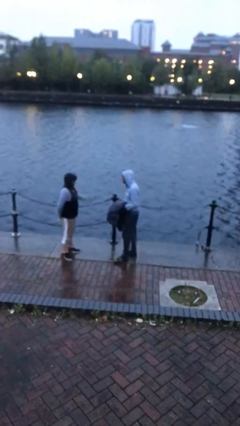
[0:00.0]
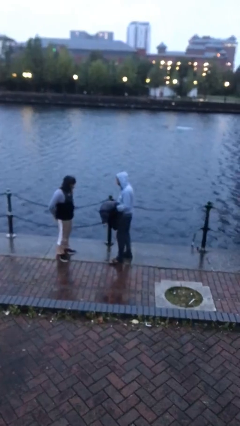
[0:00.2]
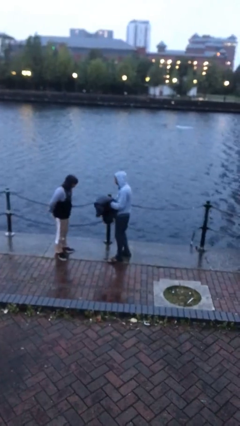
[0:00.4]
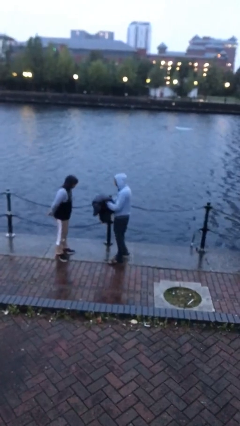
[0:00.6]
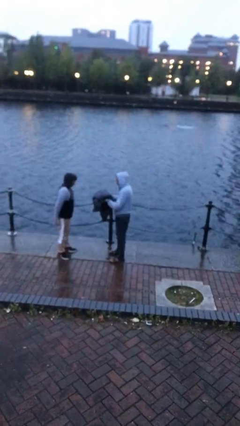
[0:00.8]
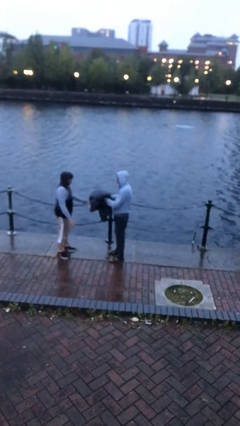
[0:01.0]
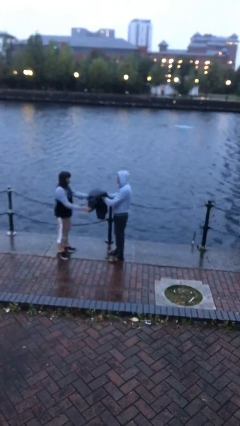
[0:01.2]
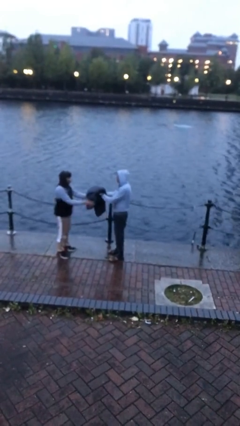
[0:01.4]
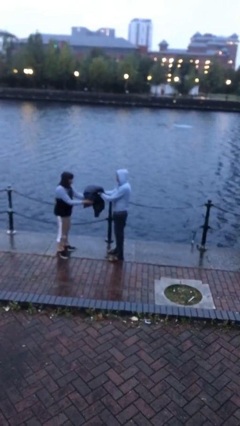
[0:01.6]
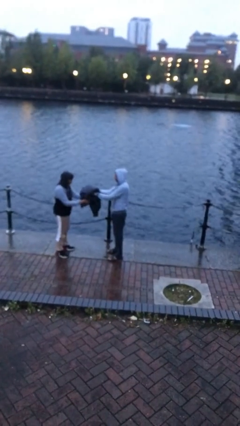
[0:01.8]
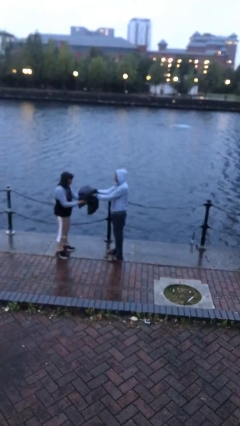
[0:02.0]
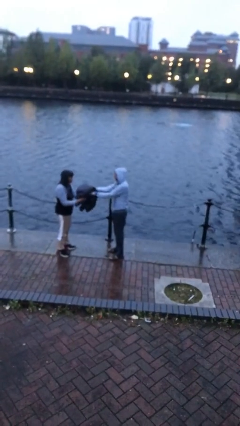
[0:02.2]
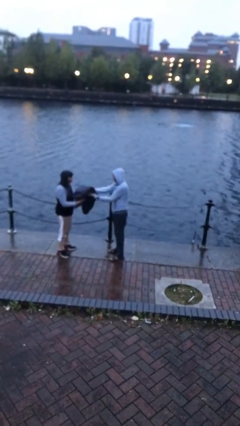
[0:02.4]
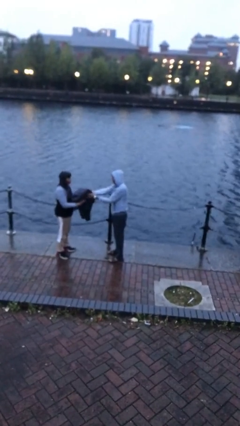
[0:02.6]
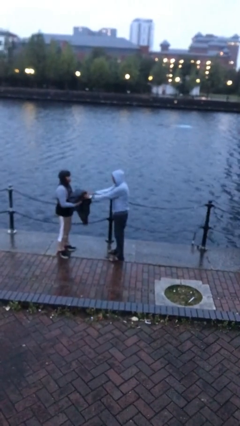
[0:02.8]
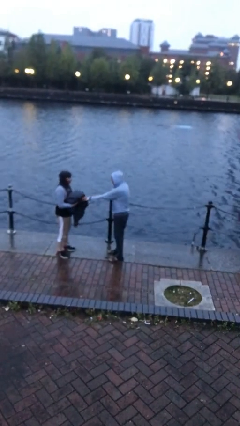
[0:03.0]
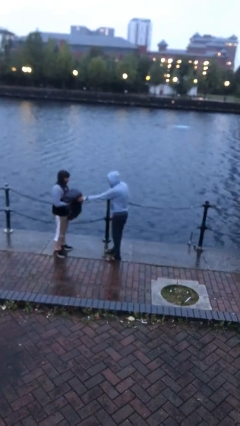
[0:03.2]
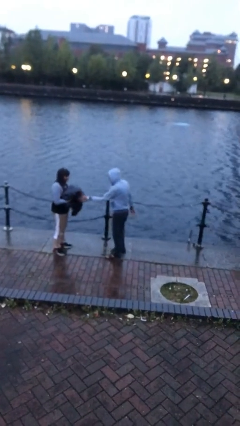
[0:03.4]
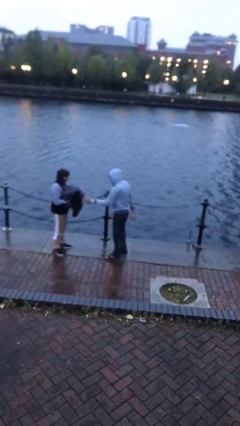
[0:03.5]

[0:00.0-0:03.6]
person transfers object to person

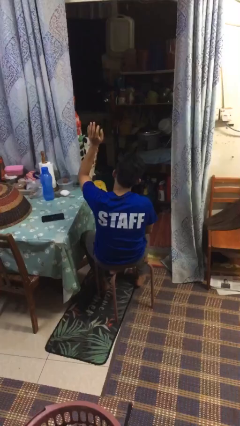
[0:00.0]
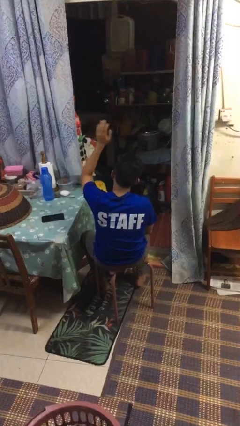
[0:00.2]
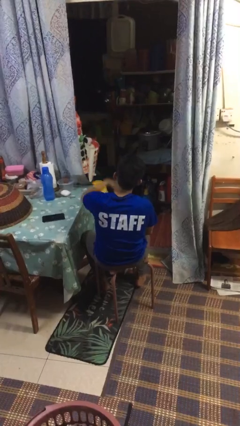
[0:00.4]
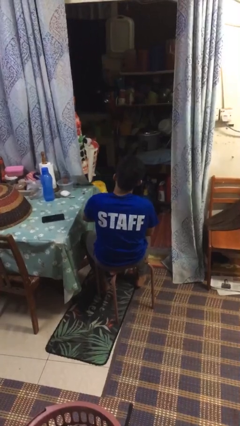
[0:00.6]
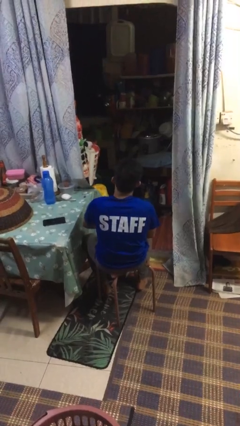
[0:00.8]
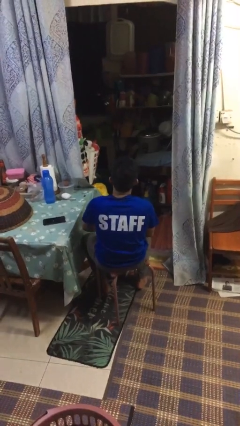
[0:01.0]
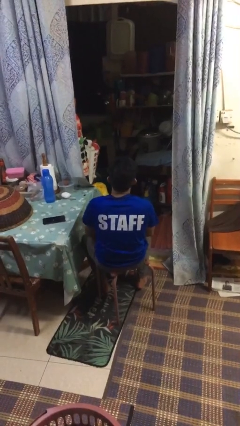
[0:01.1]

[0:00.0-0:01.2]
person gestures swipe down

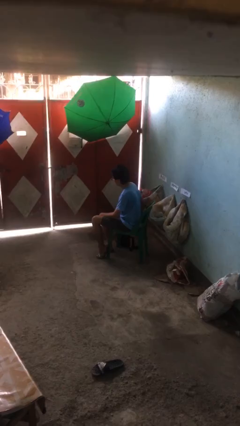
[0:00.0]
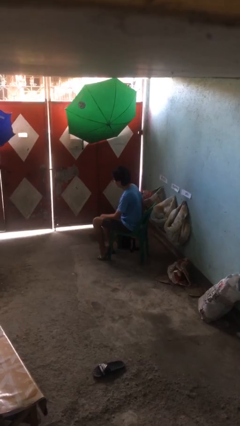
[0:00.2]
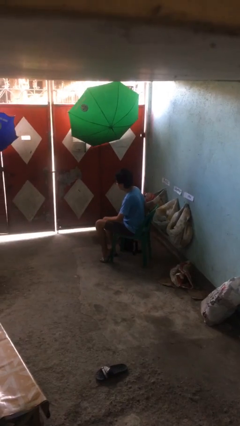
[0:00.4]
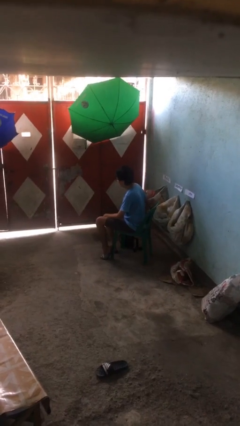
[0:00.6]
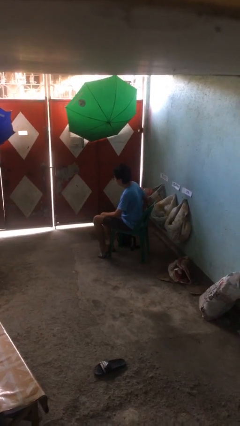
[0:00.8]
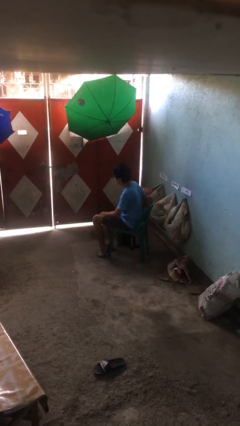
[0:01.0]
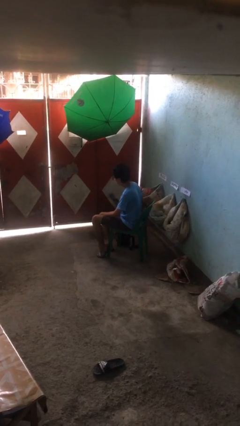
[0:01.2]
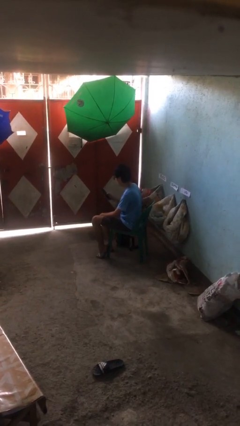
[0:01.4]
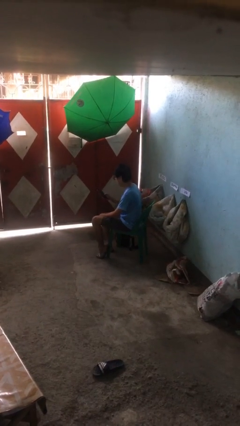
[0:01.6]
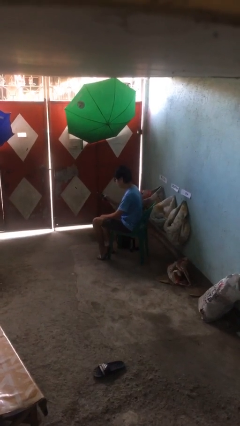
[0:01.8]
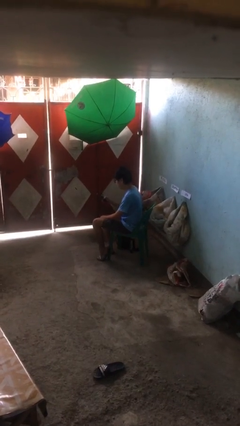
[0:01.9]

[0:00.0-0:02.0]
person takes phone from pocket

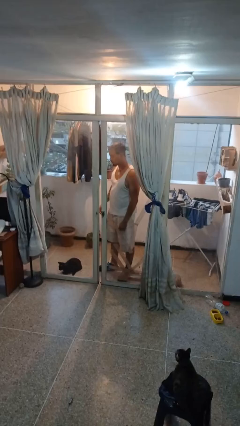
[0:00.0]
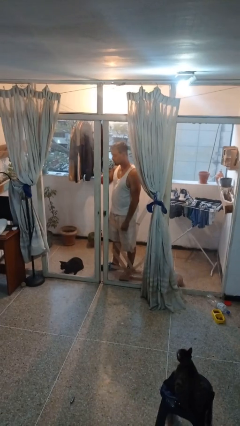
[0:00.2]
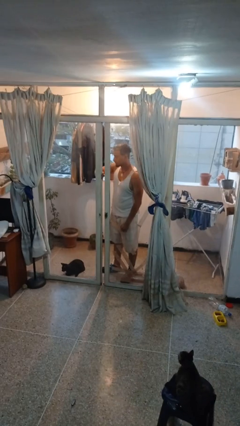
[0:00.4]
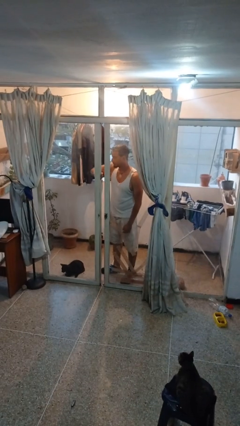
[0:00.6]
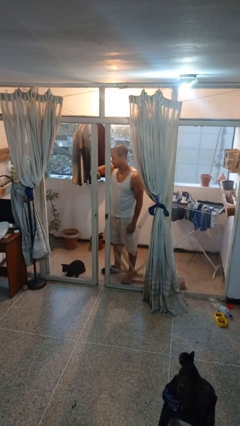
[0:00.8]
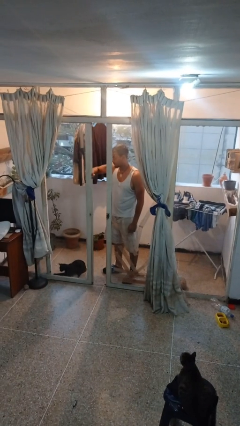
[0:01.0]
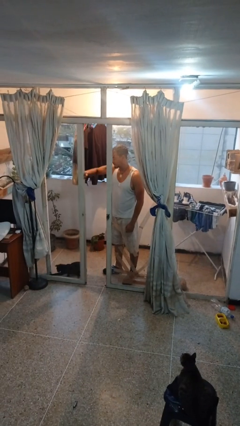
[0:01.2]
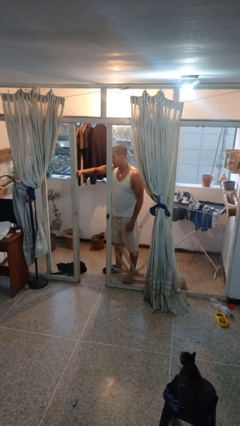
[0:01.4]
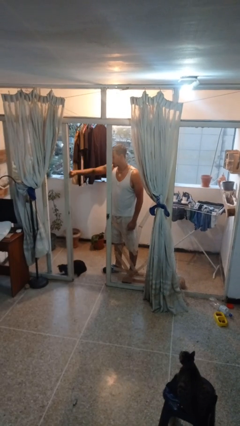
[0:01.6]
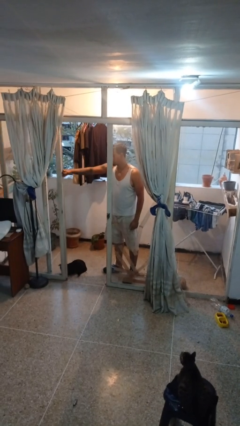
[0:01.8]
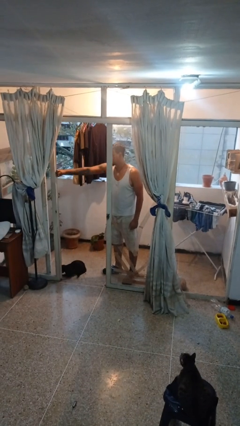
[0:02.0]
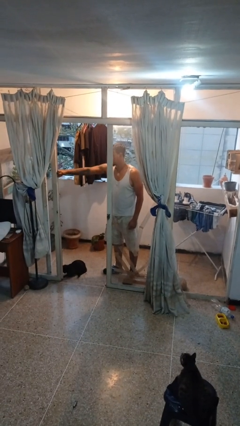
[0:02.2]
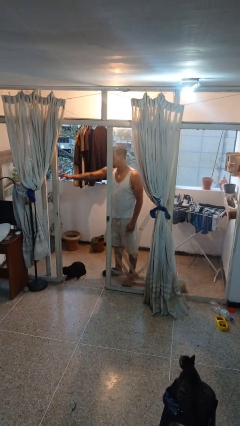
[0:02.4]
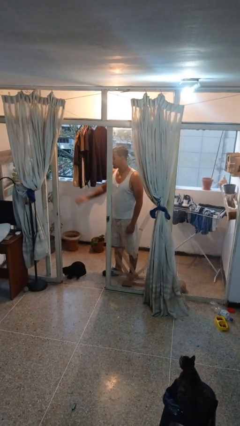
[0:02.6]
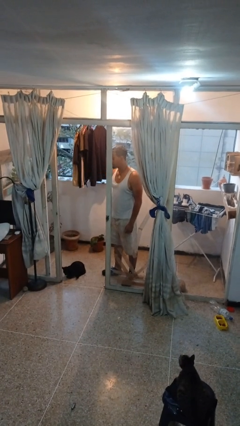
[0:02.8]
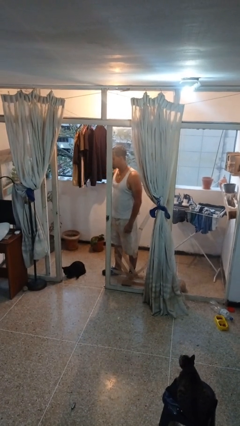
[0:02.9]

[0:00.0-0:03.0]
person opens sliding door

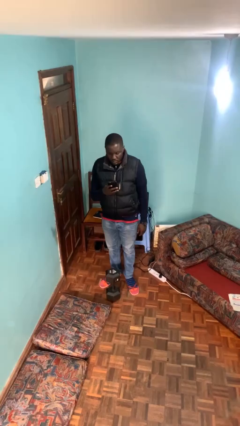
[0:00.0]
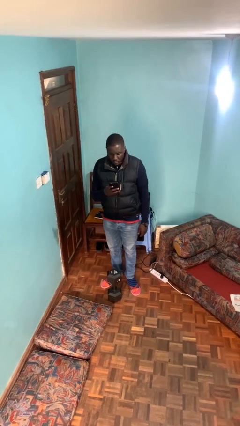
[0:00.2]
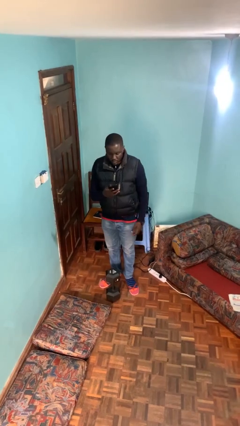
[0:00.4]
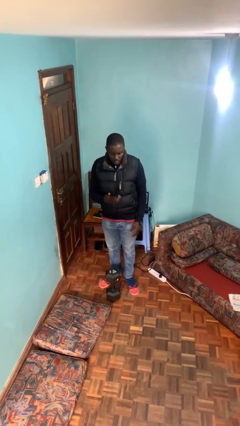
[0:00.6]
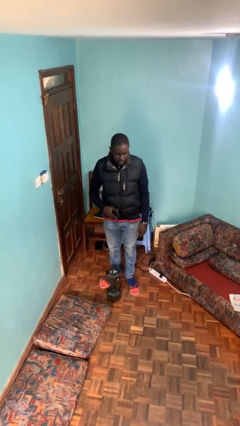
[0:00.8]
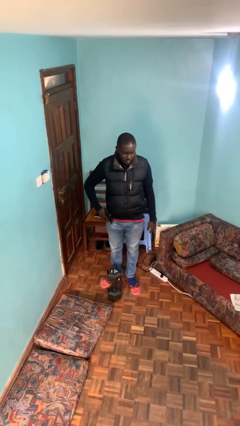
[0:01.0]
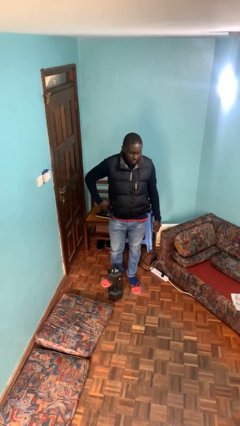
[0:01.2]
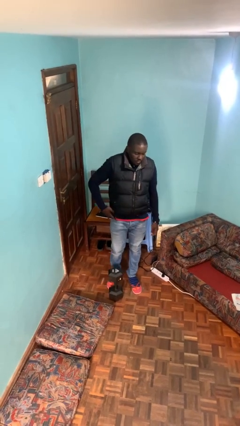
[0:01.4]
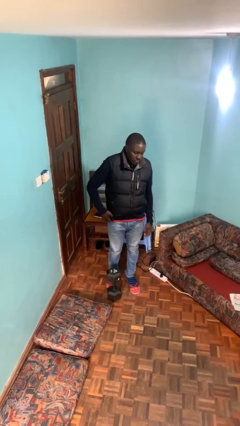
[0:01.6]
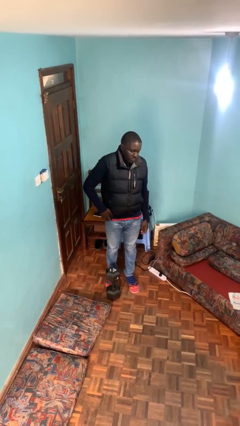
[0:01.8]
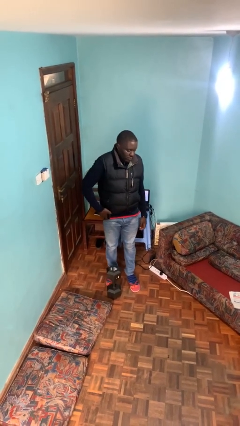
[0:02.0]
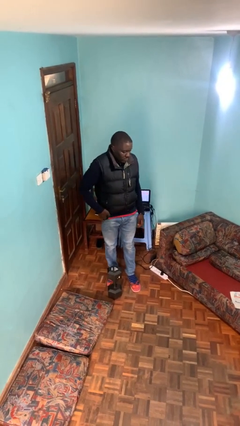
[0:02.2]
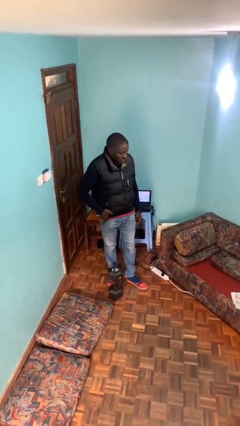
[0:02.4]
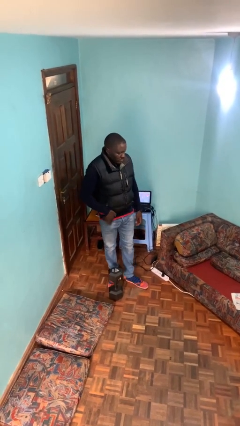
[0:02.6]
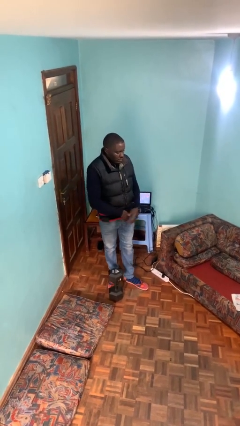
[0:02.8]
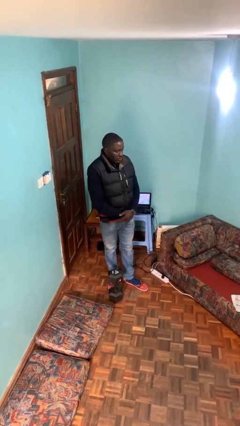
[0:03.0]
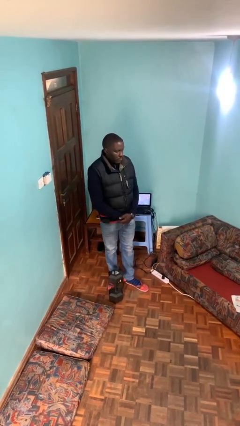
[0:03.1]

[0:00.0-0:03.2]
person puts phone into pocket

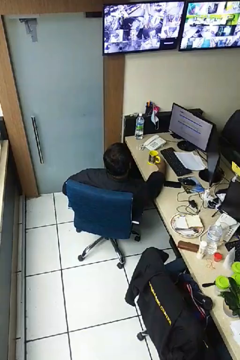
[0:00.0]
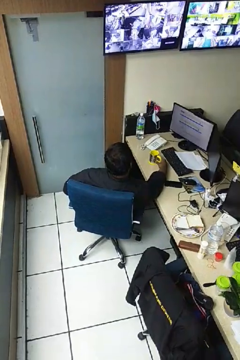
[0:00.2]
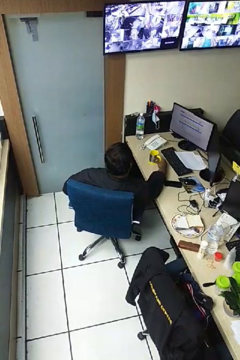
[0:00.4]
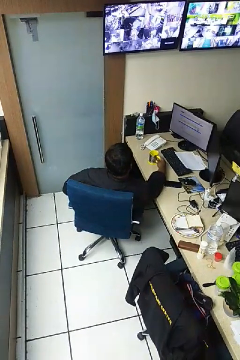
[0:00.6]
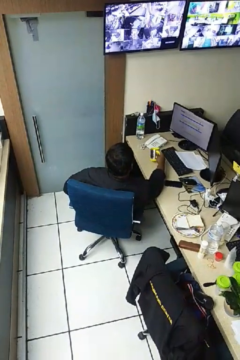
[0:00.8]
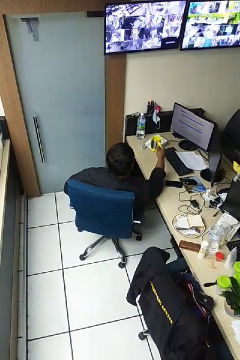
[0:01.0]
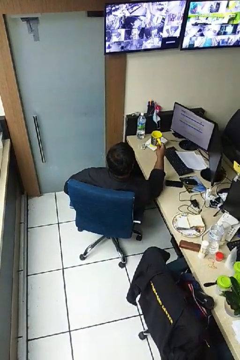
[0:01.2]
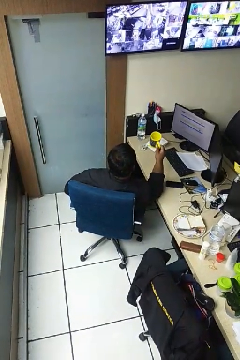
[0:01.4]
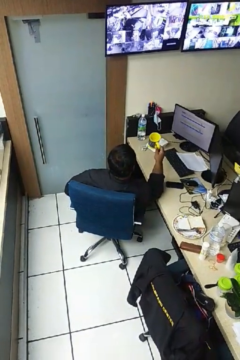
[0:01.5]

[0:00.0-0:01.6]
person picks up object from table

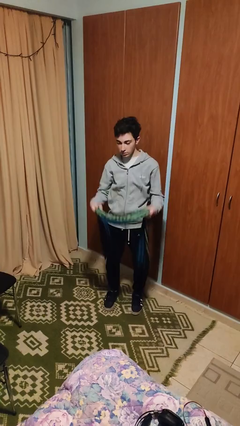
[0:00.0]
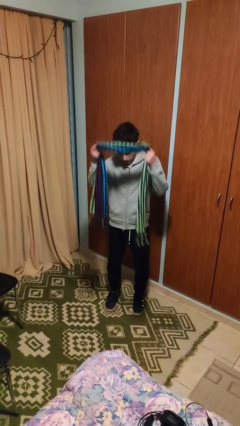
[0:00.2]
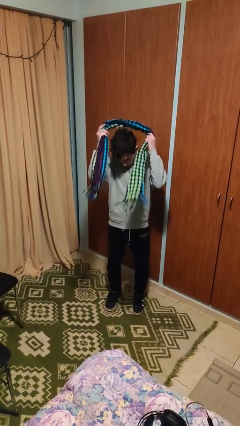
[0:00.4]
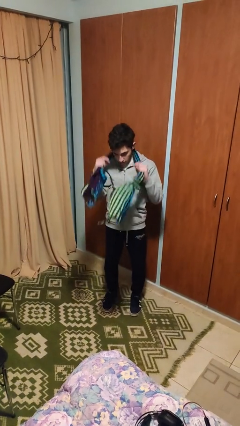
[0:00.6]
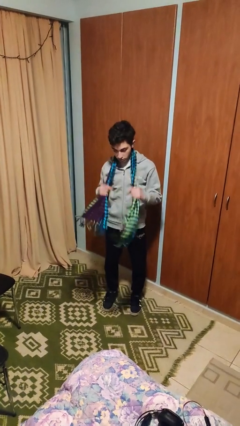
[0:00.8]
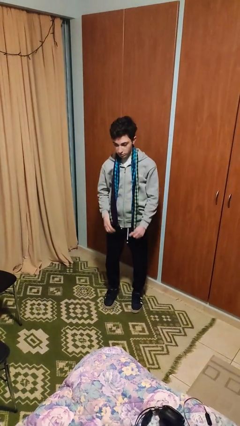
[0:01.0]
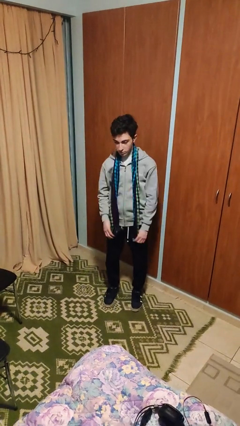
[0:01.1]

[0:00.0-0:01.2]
person puts on scarf

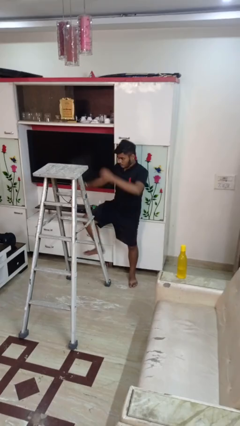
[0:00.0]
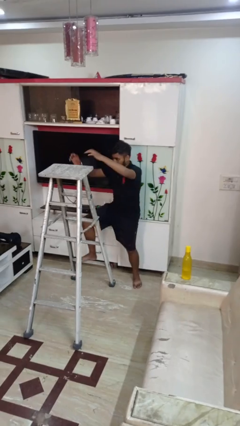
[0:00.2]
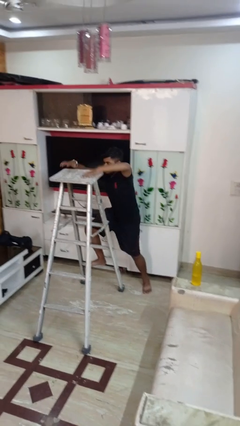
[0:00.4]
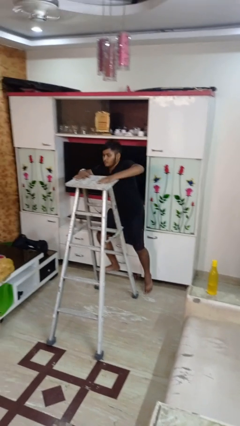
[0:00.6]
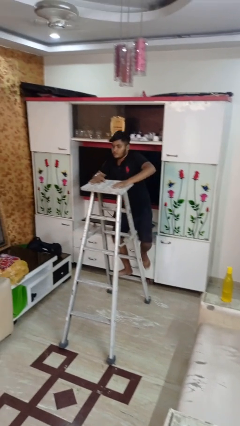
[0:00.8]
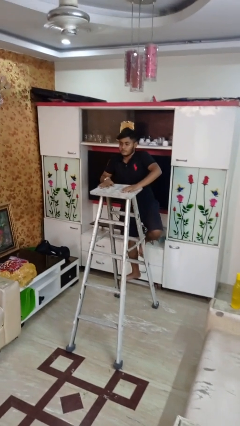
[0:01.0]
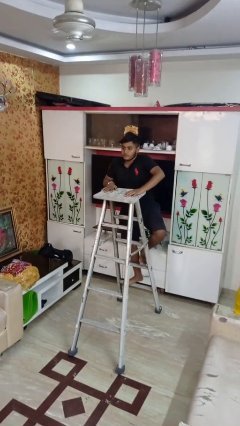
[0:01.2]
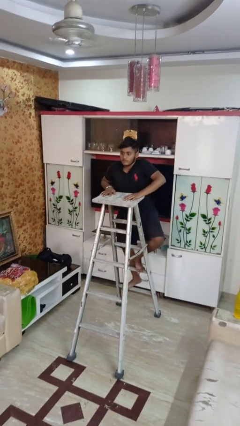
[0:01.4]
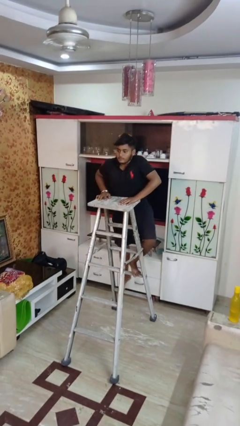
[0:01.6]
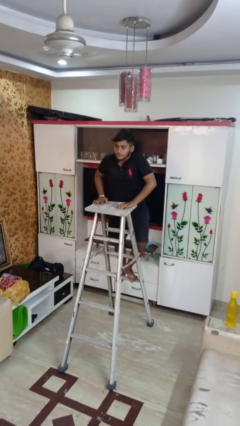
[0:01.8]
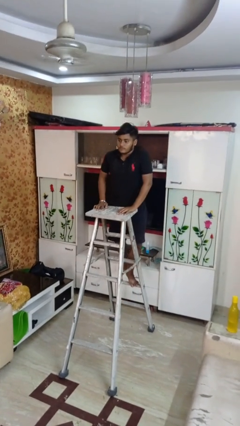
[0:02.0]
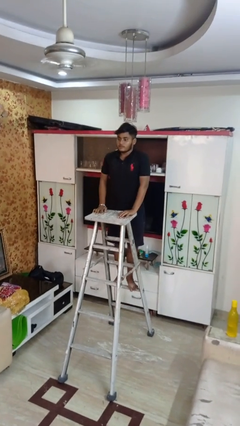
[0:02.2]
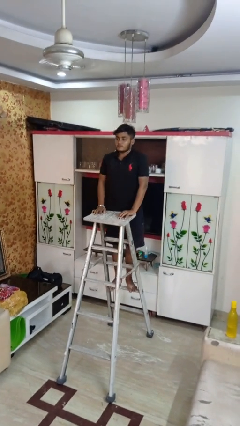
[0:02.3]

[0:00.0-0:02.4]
person climbs up ladder
